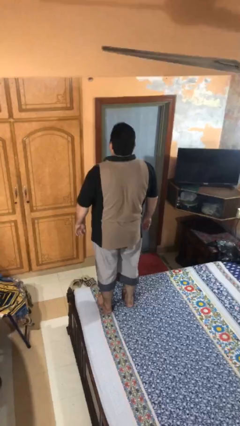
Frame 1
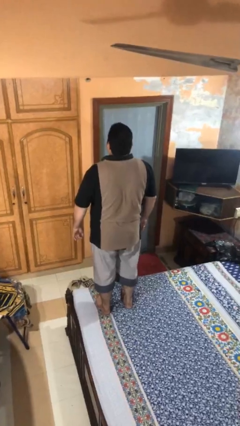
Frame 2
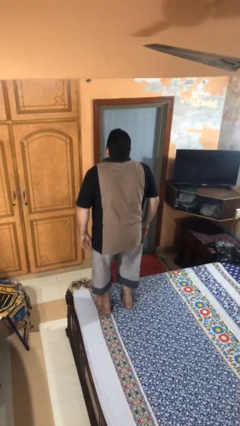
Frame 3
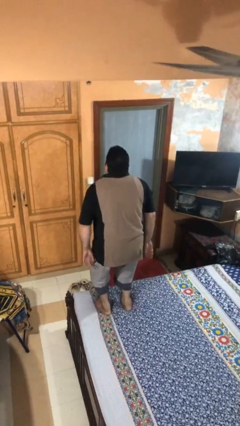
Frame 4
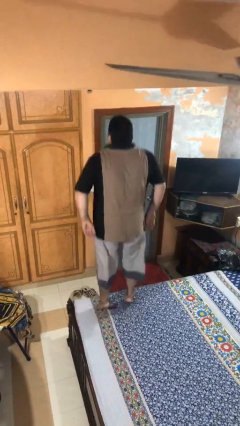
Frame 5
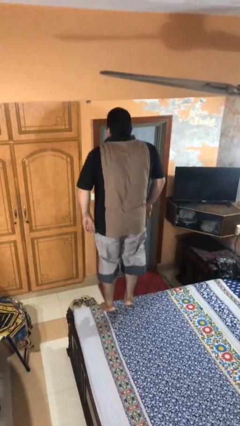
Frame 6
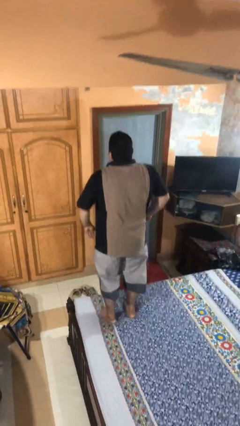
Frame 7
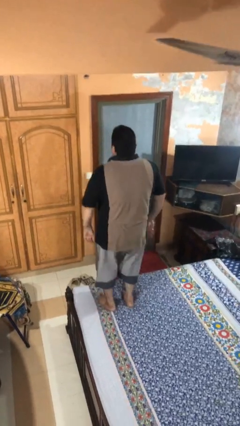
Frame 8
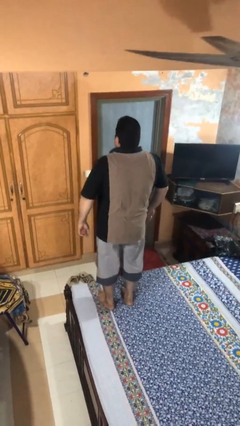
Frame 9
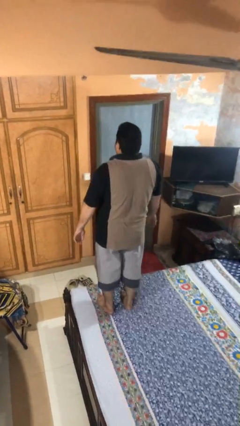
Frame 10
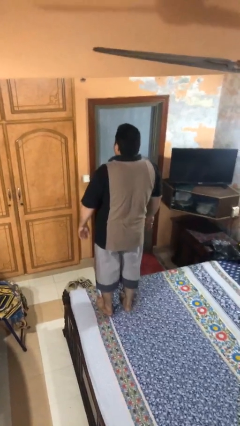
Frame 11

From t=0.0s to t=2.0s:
person jumps on bed

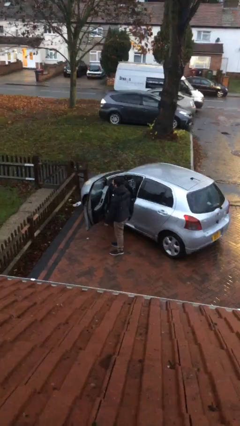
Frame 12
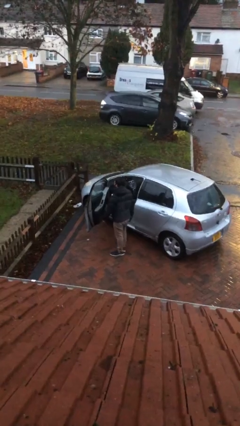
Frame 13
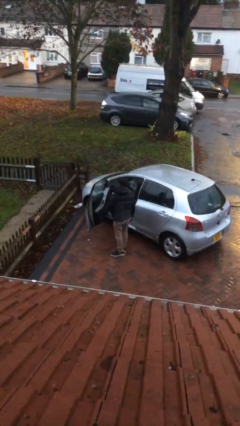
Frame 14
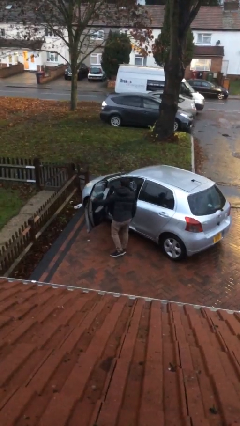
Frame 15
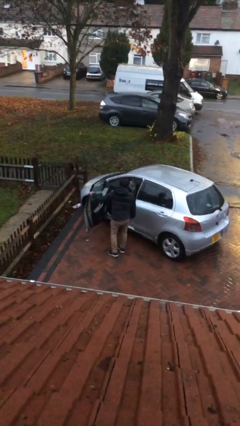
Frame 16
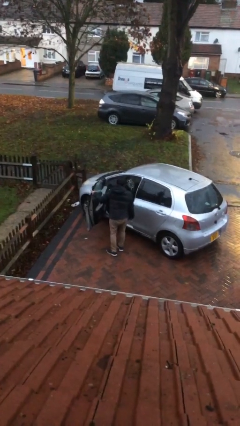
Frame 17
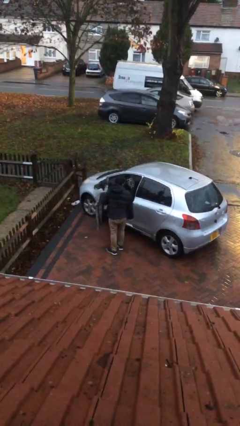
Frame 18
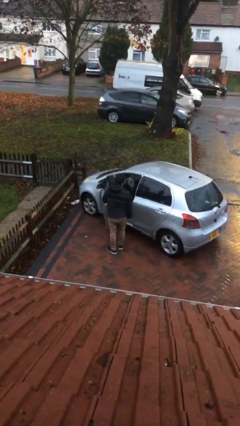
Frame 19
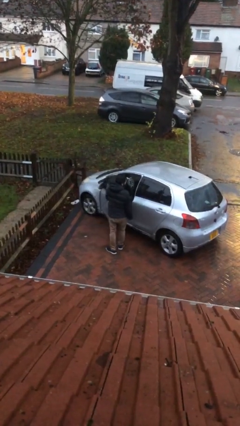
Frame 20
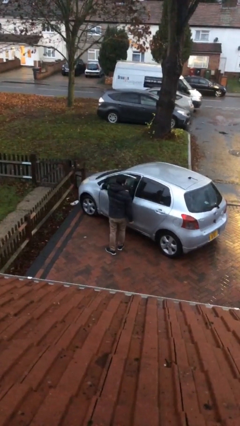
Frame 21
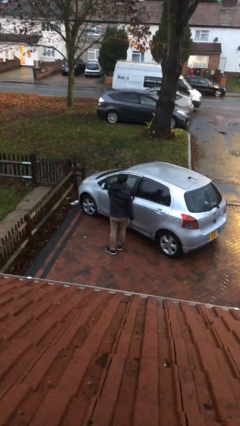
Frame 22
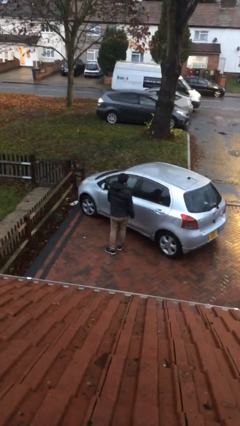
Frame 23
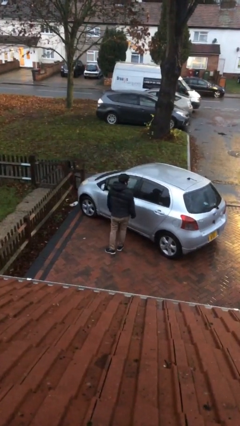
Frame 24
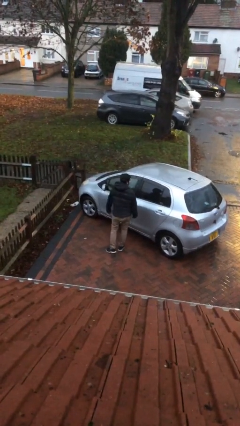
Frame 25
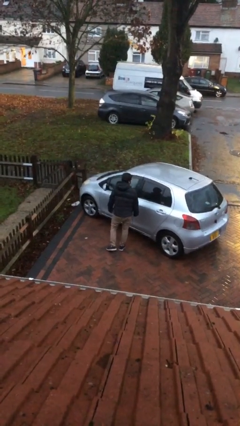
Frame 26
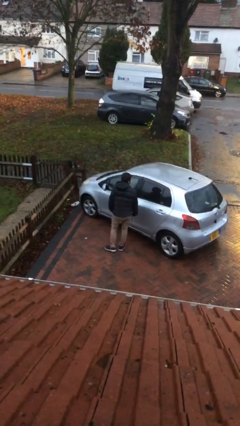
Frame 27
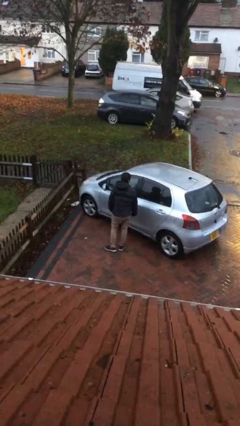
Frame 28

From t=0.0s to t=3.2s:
person closes car door

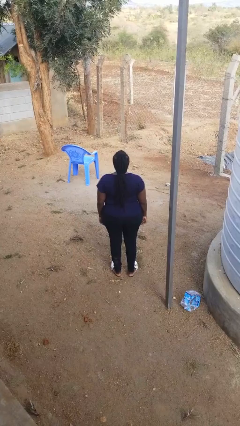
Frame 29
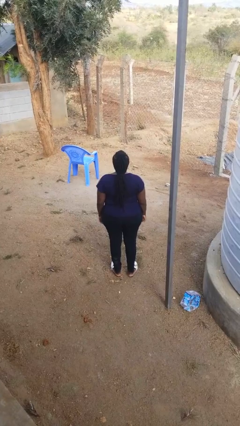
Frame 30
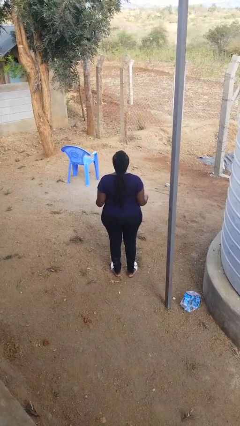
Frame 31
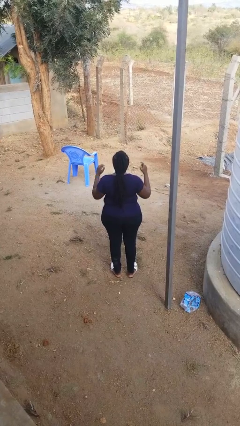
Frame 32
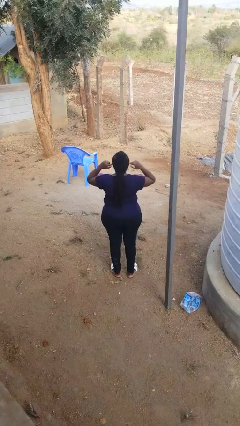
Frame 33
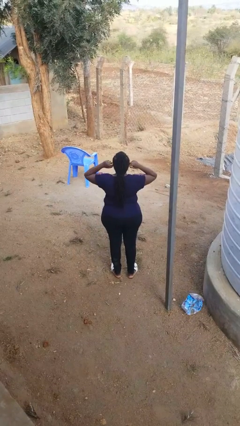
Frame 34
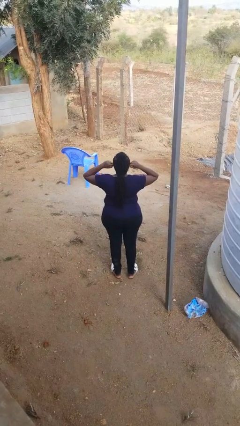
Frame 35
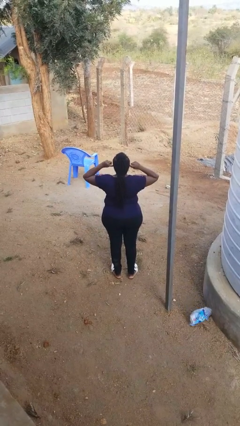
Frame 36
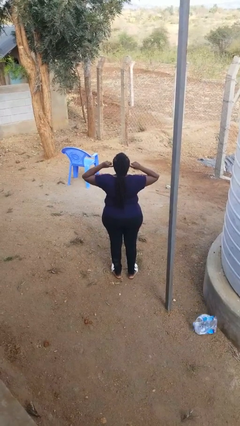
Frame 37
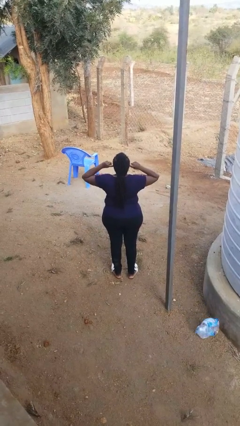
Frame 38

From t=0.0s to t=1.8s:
person puts fingers in ear

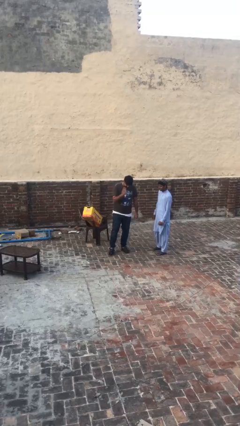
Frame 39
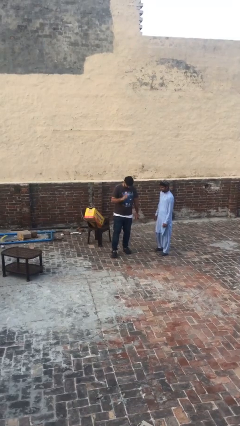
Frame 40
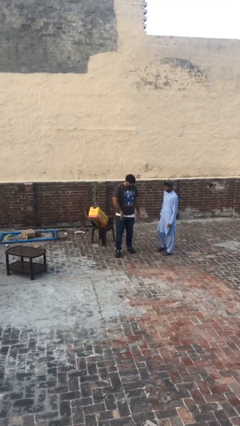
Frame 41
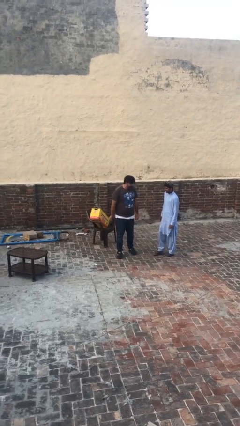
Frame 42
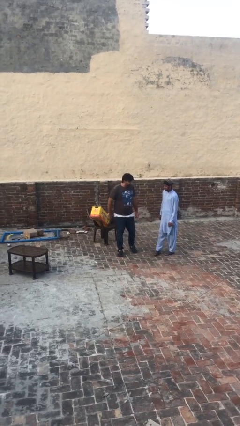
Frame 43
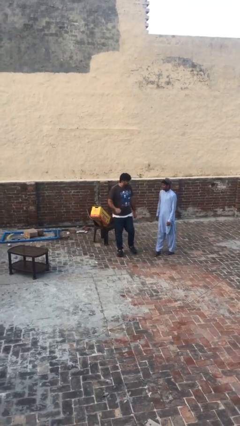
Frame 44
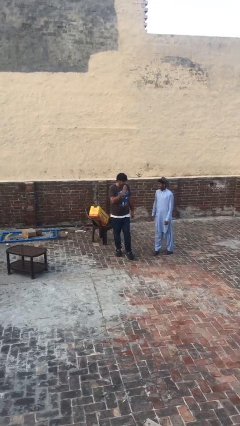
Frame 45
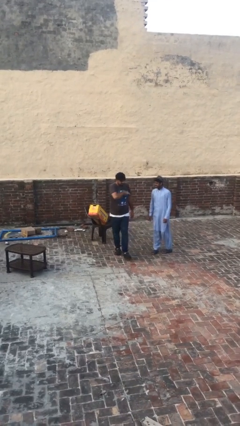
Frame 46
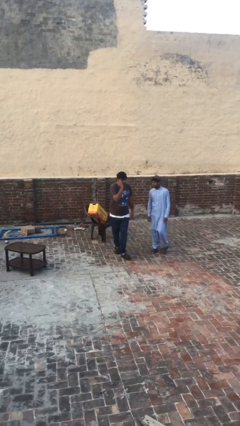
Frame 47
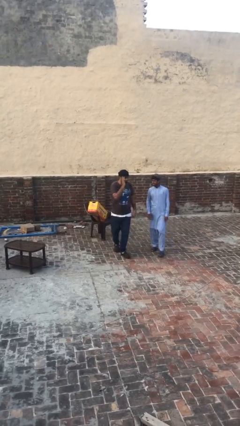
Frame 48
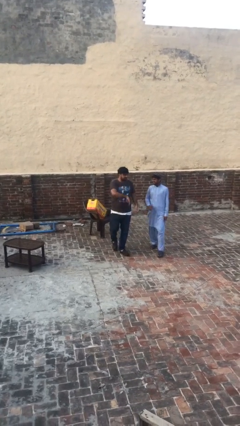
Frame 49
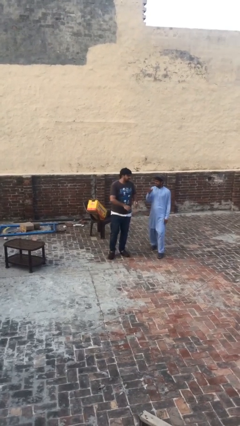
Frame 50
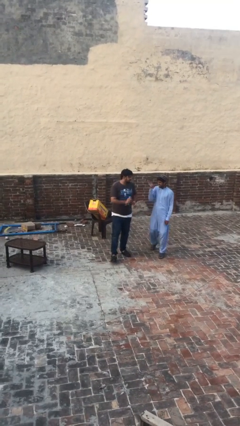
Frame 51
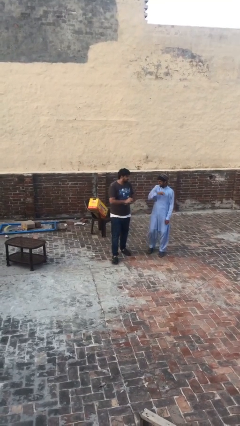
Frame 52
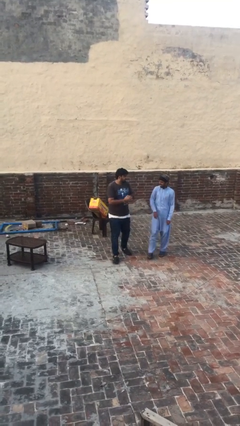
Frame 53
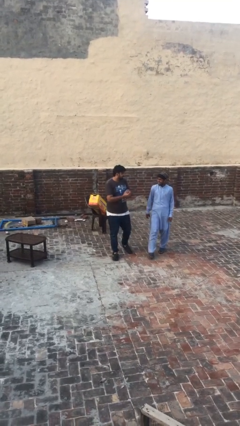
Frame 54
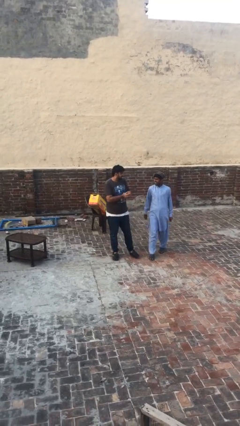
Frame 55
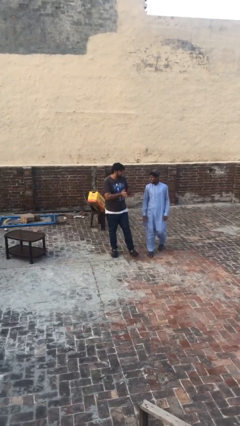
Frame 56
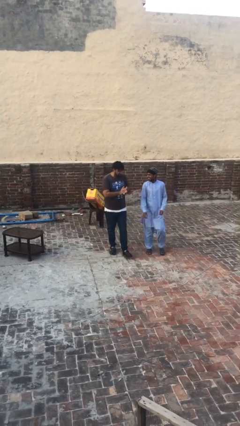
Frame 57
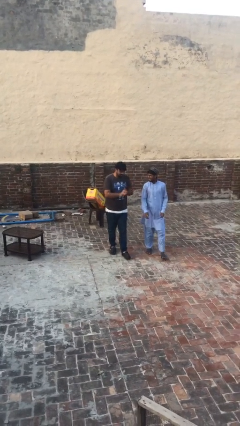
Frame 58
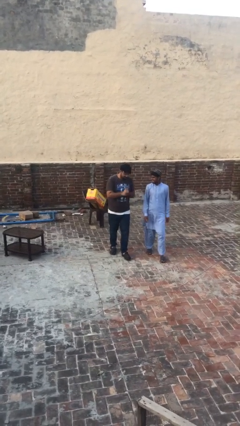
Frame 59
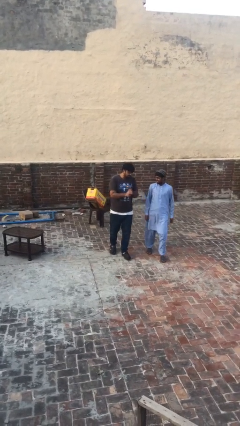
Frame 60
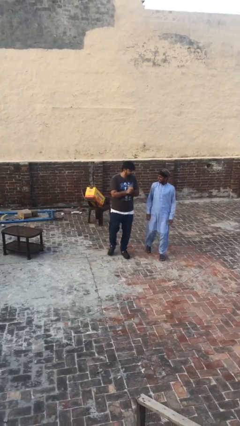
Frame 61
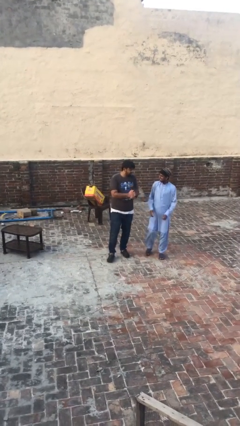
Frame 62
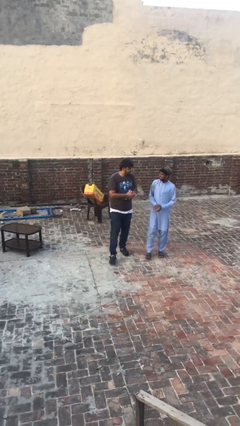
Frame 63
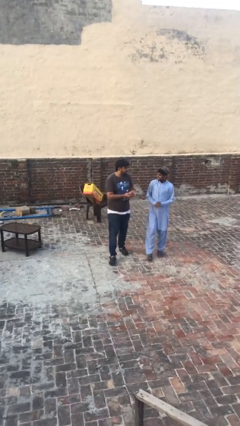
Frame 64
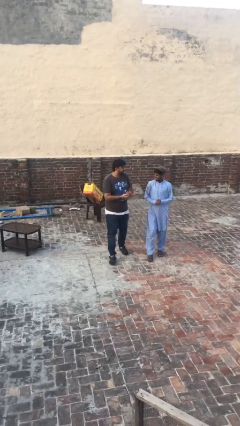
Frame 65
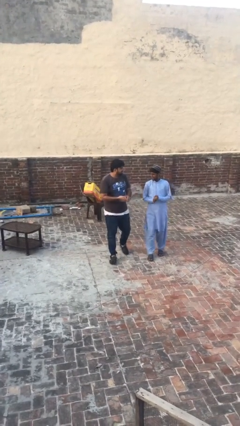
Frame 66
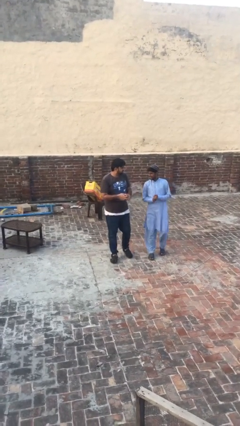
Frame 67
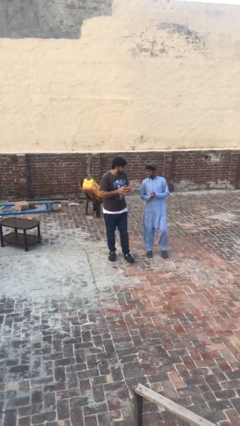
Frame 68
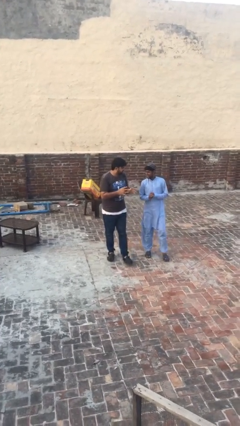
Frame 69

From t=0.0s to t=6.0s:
person talks to person

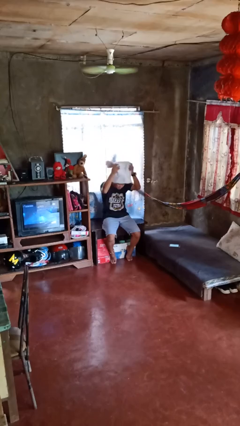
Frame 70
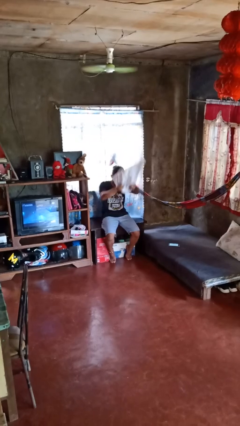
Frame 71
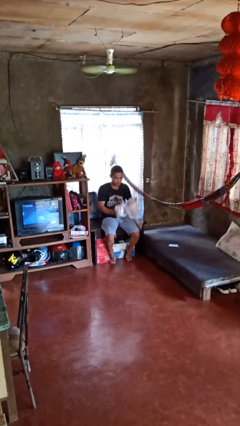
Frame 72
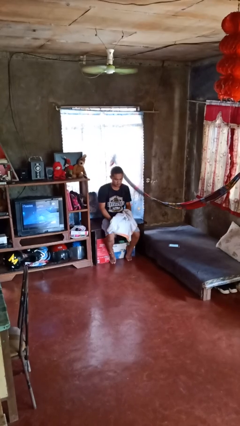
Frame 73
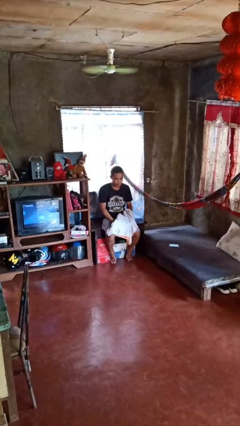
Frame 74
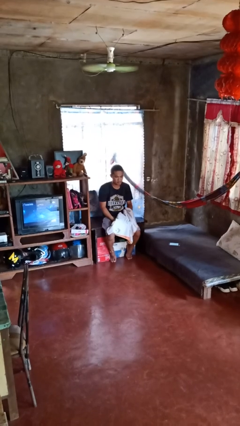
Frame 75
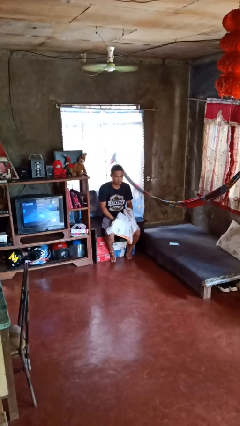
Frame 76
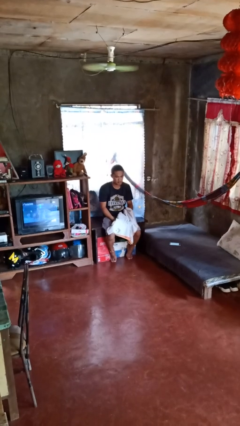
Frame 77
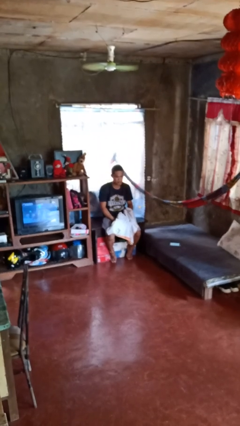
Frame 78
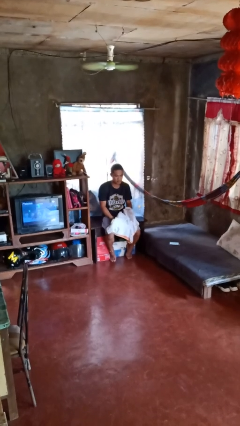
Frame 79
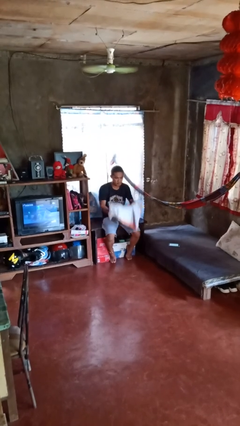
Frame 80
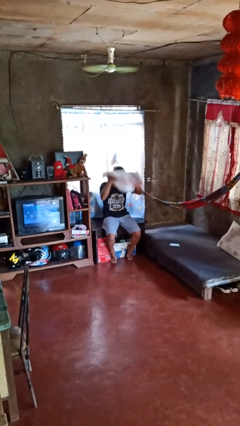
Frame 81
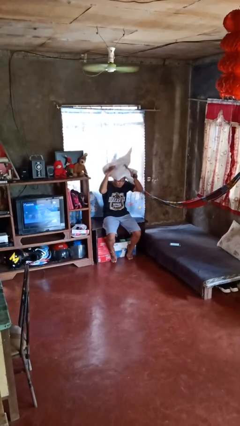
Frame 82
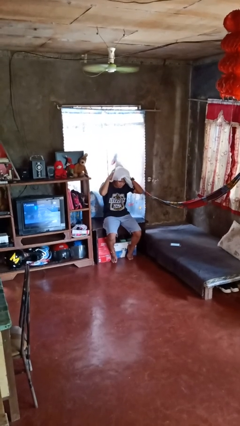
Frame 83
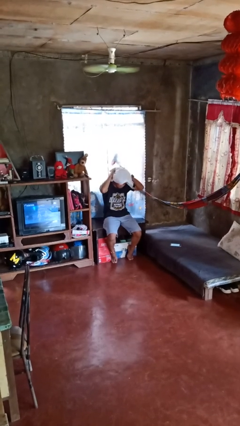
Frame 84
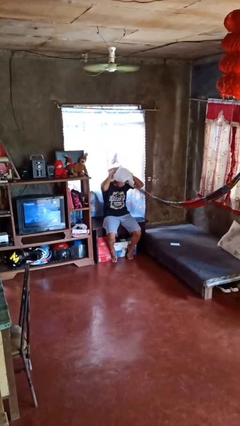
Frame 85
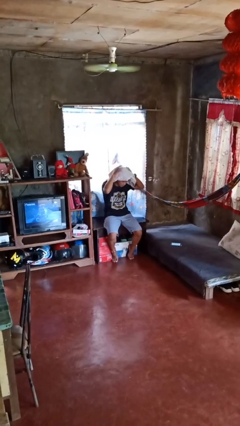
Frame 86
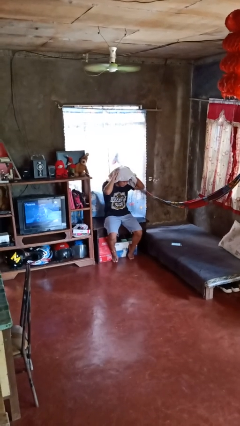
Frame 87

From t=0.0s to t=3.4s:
person wraps box

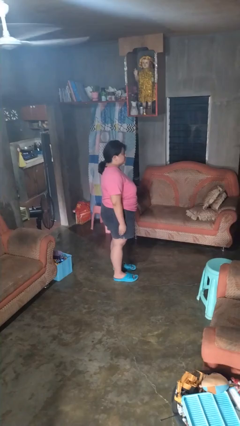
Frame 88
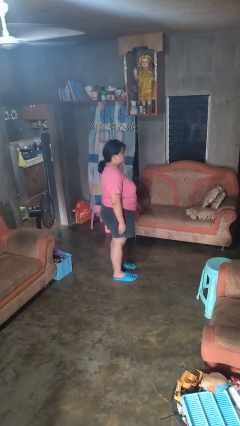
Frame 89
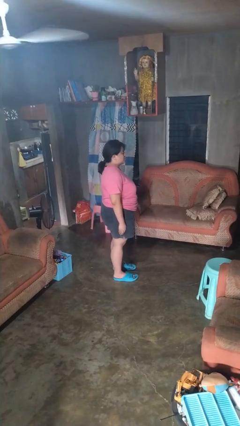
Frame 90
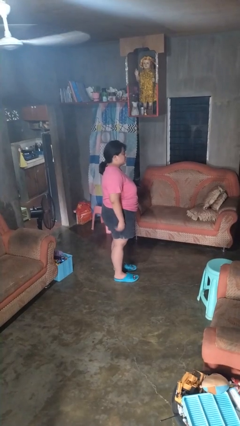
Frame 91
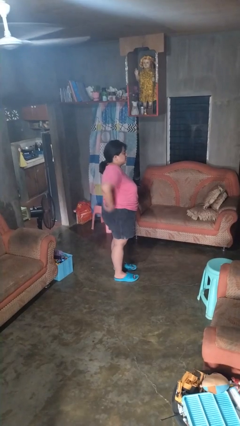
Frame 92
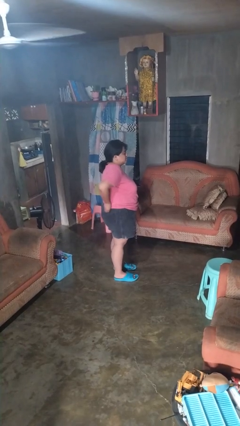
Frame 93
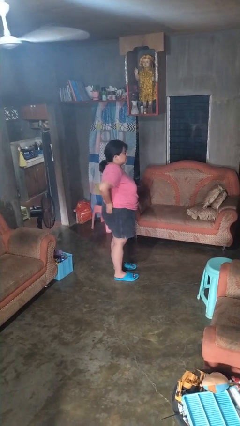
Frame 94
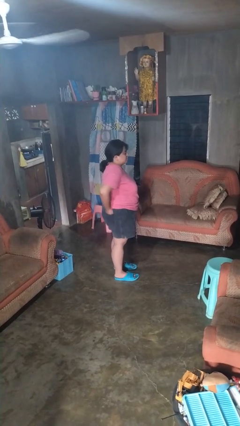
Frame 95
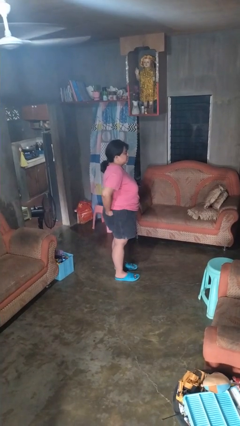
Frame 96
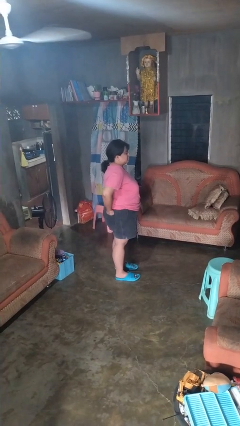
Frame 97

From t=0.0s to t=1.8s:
person puts hands in back pockets
